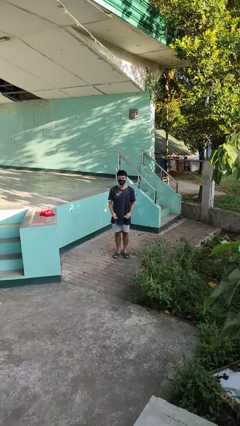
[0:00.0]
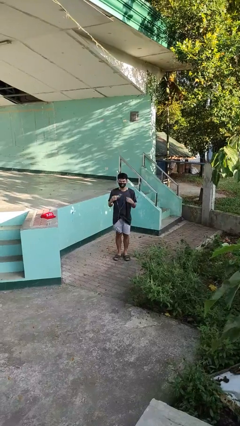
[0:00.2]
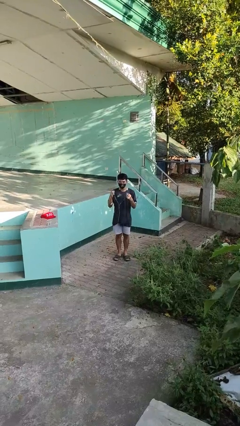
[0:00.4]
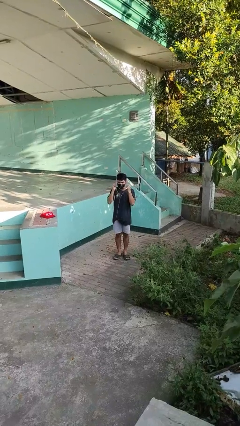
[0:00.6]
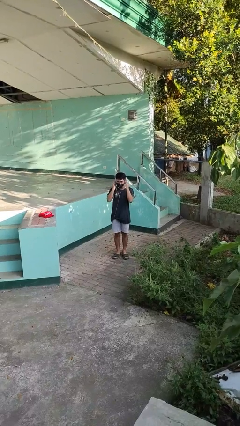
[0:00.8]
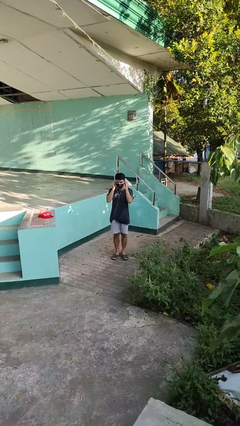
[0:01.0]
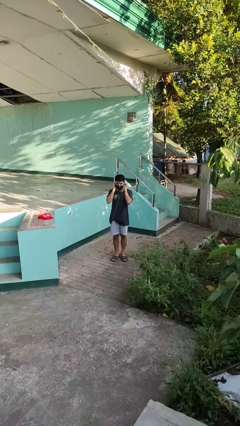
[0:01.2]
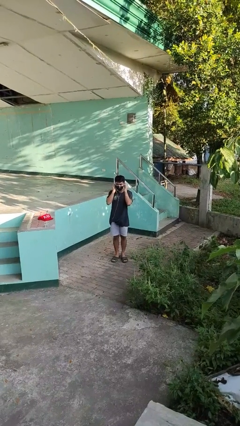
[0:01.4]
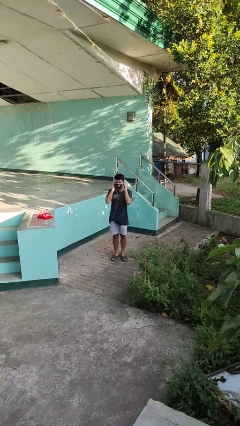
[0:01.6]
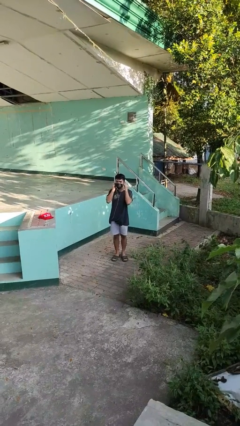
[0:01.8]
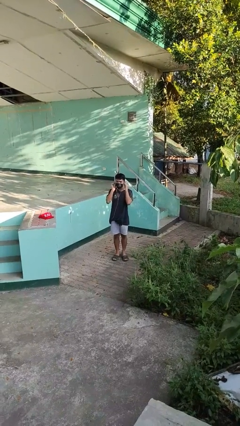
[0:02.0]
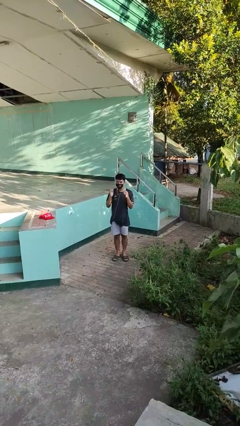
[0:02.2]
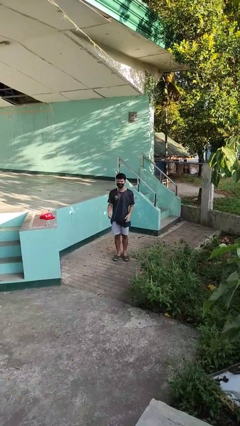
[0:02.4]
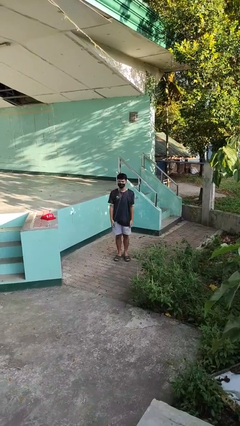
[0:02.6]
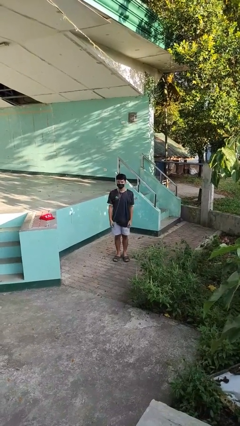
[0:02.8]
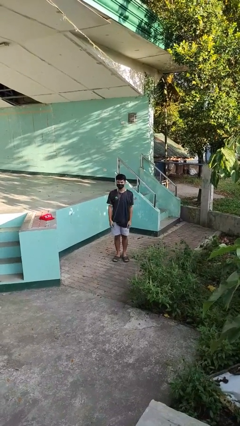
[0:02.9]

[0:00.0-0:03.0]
person puts on headphones

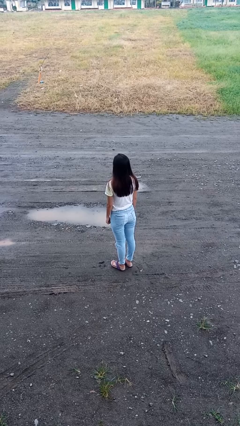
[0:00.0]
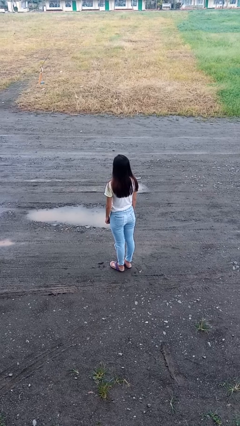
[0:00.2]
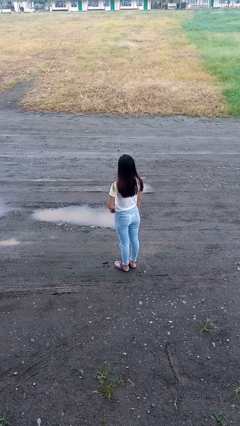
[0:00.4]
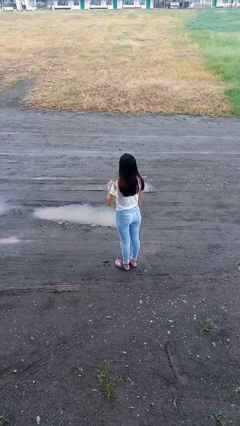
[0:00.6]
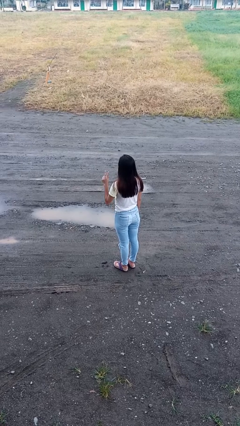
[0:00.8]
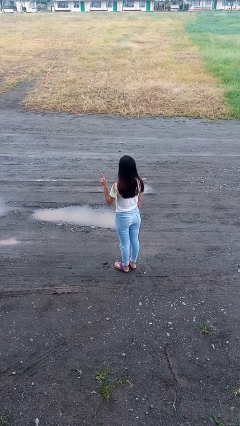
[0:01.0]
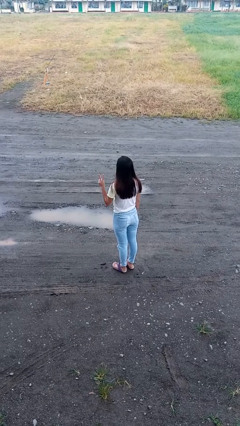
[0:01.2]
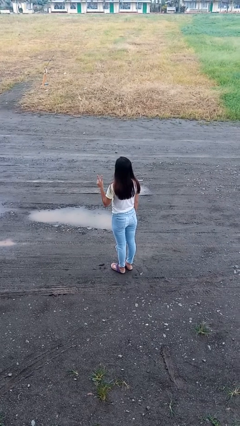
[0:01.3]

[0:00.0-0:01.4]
person gestures peace

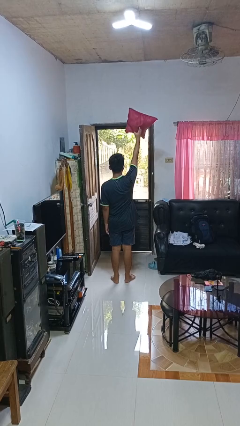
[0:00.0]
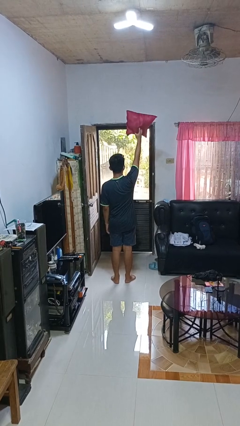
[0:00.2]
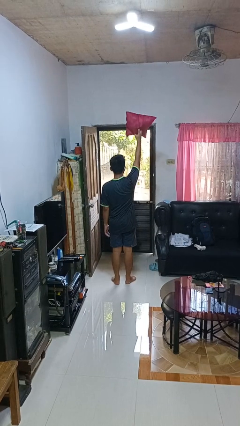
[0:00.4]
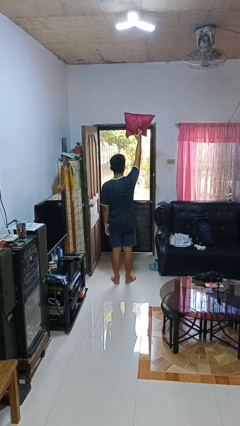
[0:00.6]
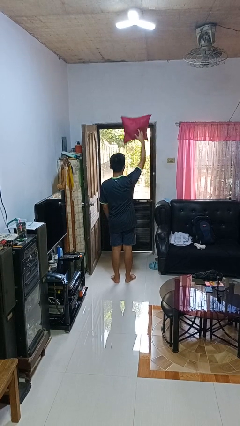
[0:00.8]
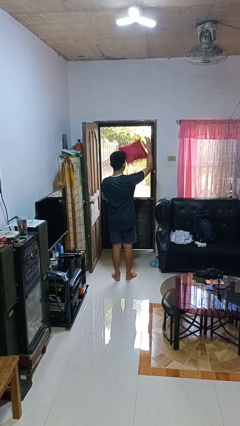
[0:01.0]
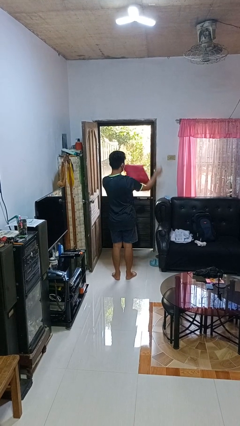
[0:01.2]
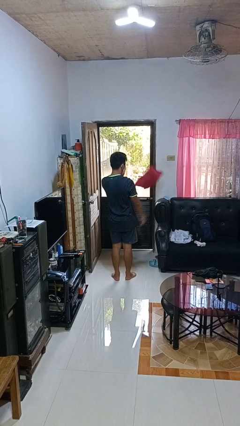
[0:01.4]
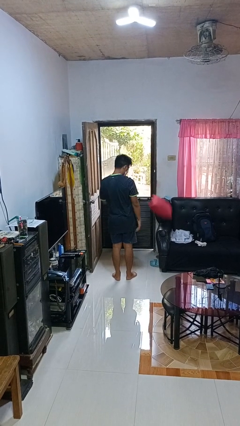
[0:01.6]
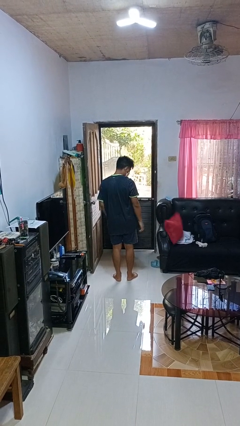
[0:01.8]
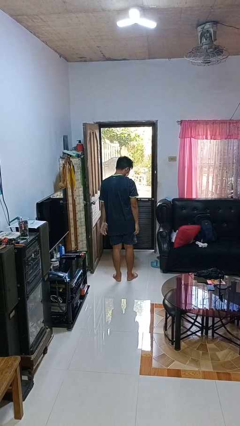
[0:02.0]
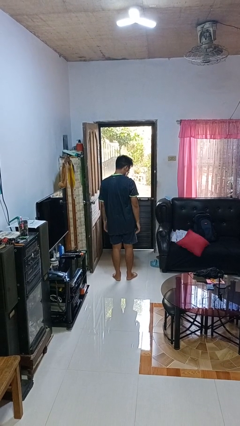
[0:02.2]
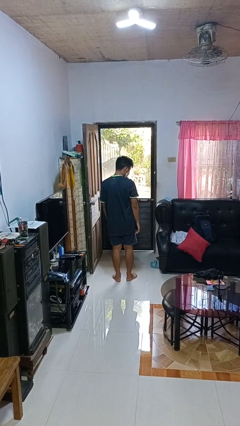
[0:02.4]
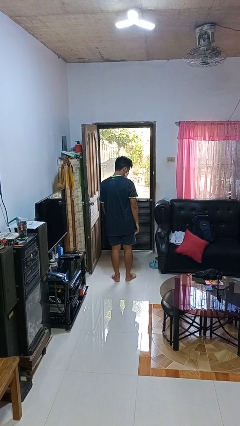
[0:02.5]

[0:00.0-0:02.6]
person drops object

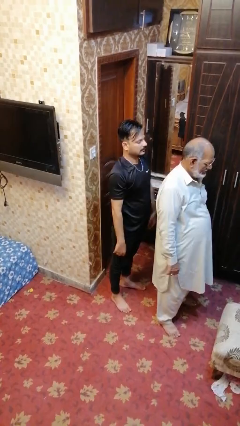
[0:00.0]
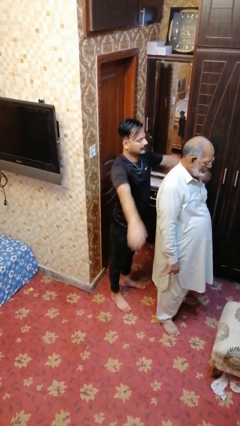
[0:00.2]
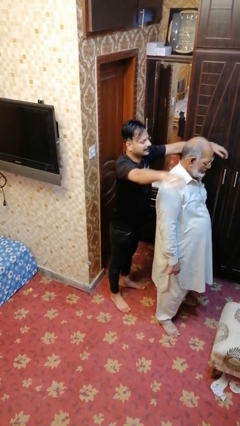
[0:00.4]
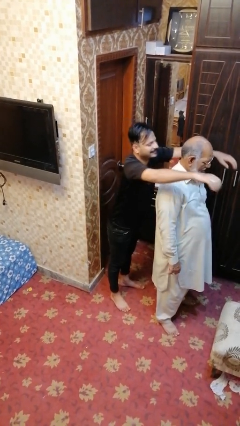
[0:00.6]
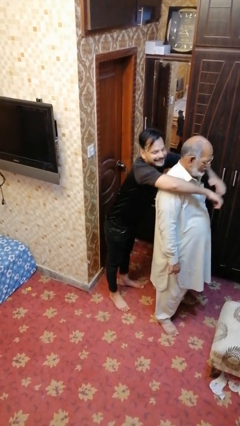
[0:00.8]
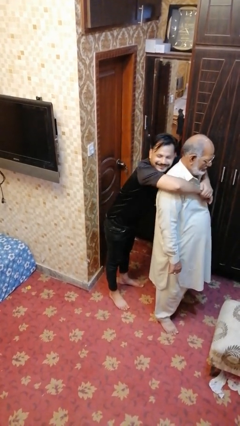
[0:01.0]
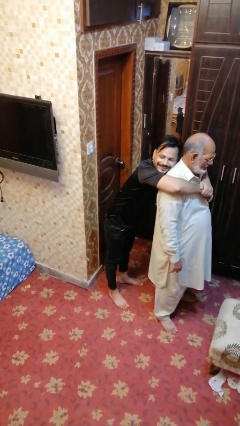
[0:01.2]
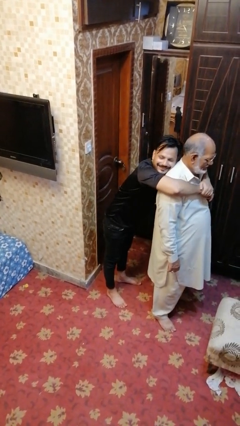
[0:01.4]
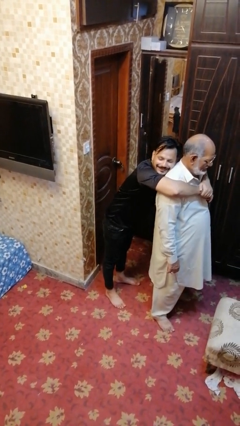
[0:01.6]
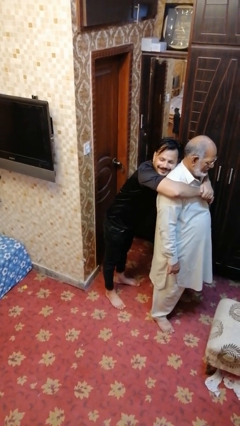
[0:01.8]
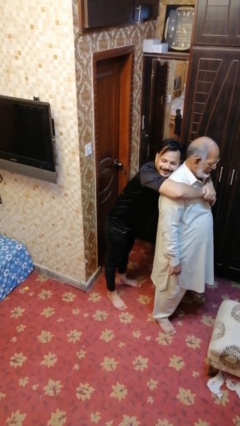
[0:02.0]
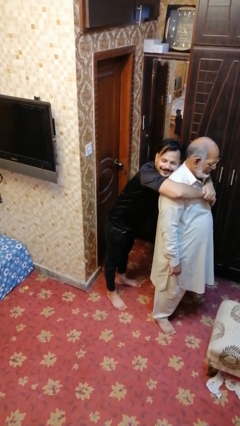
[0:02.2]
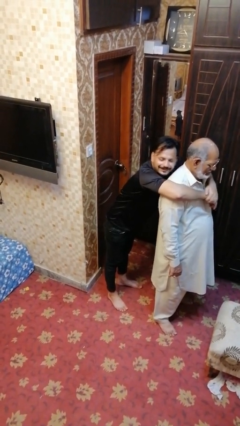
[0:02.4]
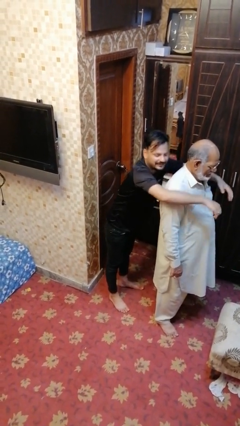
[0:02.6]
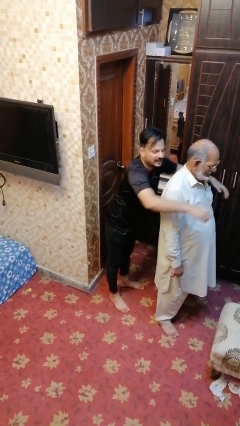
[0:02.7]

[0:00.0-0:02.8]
person hugs person from behind

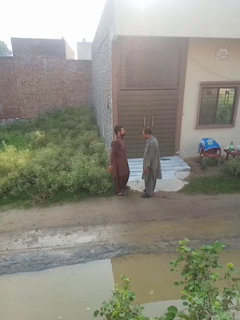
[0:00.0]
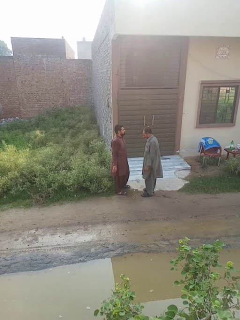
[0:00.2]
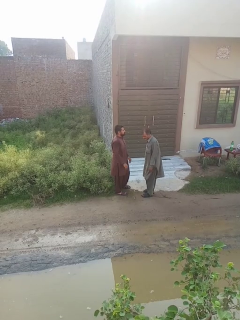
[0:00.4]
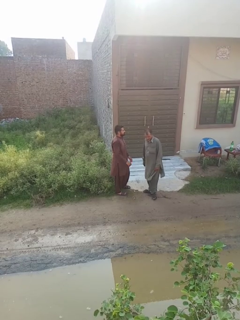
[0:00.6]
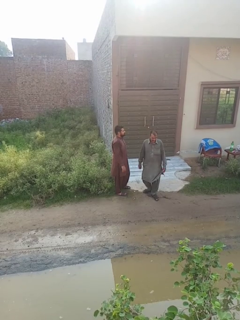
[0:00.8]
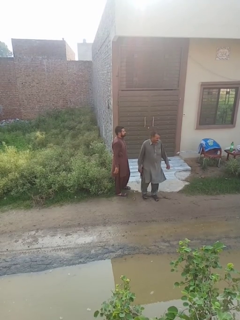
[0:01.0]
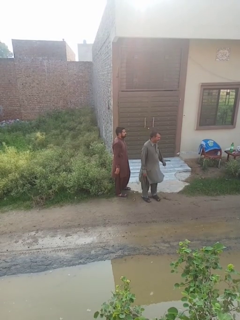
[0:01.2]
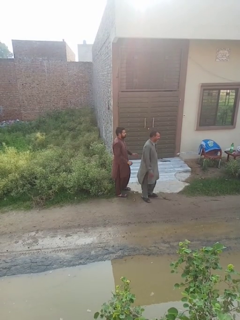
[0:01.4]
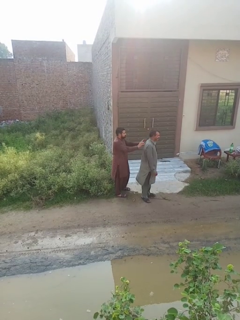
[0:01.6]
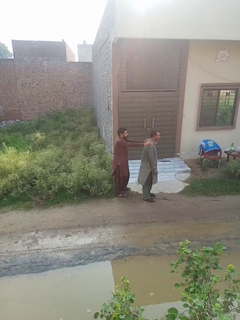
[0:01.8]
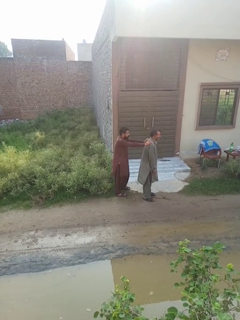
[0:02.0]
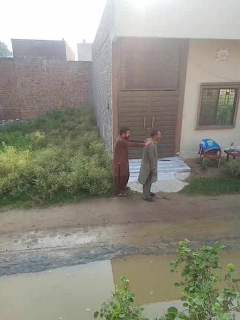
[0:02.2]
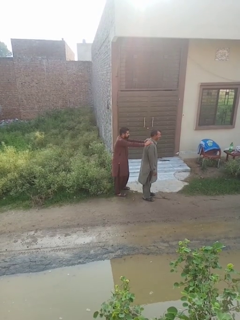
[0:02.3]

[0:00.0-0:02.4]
person grabs person by shoulder

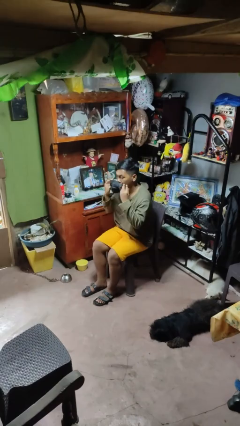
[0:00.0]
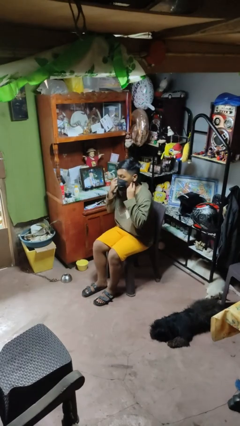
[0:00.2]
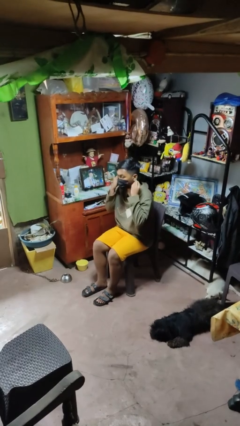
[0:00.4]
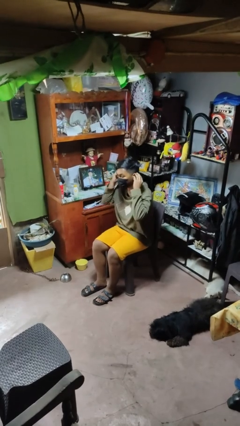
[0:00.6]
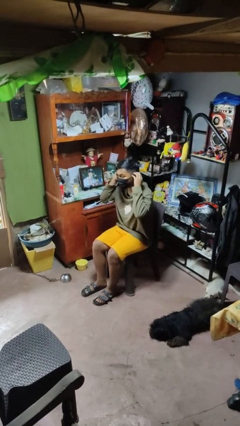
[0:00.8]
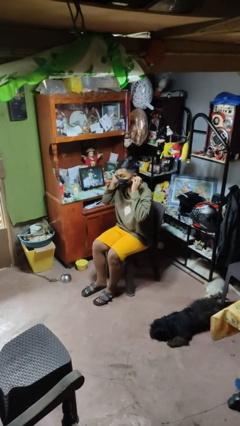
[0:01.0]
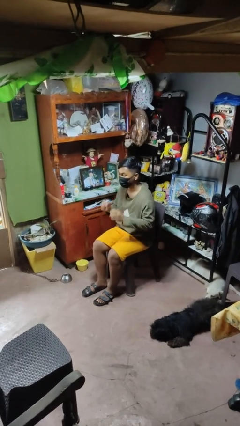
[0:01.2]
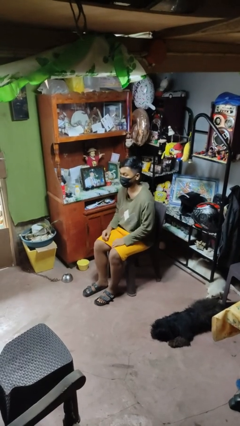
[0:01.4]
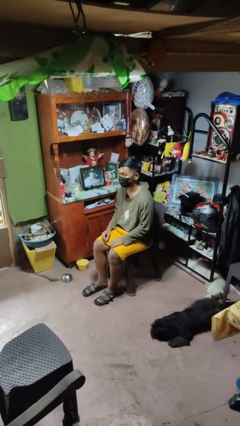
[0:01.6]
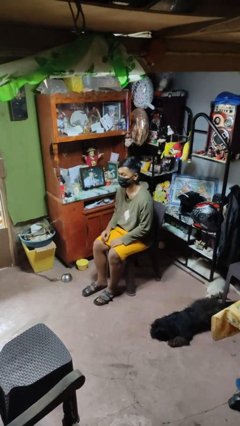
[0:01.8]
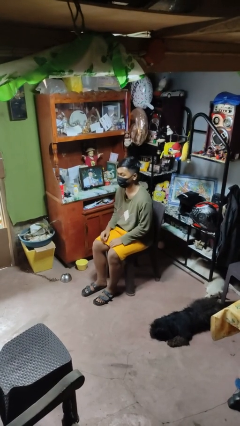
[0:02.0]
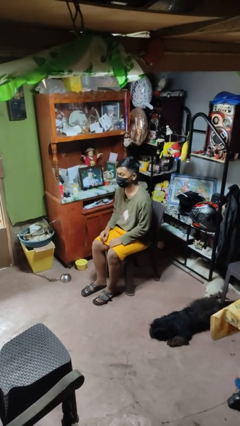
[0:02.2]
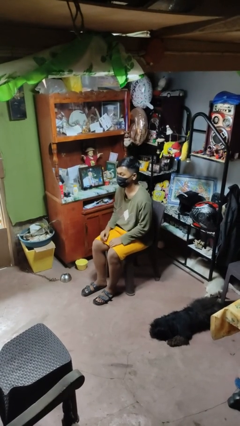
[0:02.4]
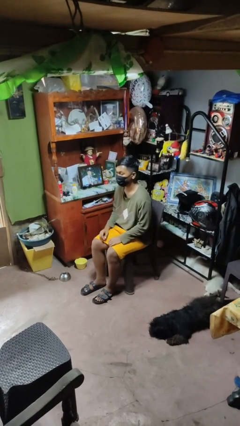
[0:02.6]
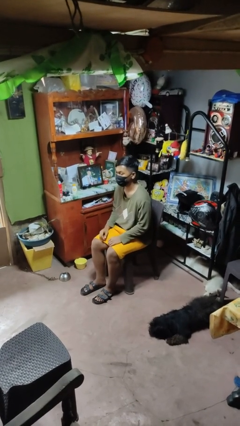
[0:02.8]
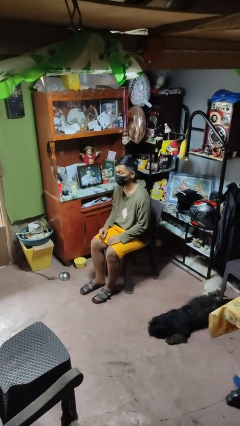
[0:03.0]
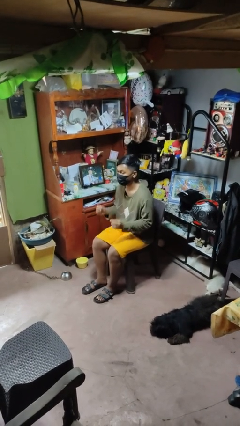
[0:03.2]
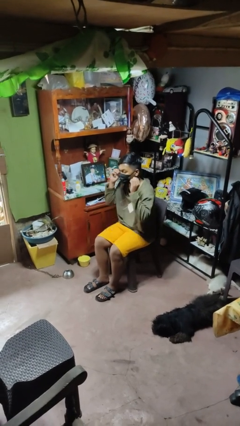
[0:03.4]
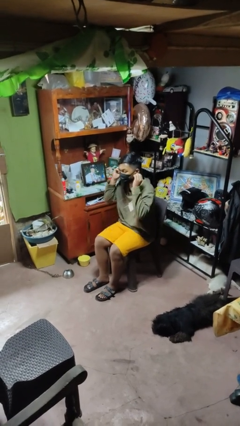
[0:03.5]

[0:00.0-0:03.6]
person puts on facemask

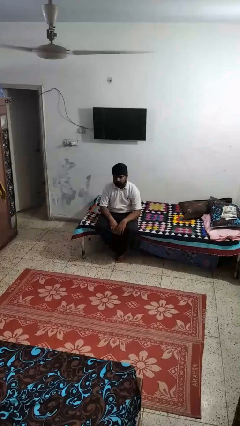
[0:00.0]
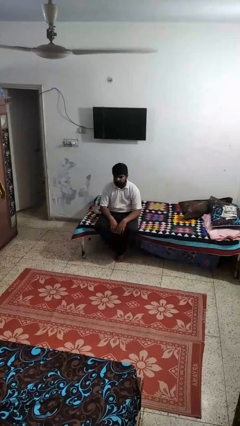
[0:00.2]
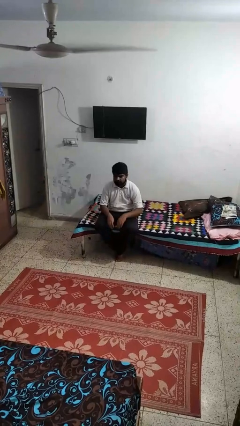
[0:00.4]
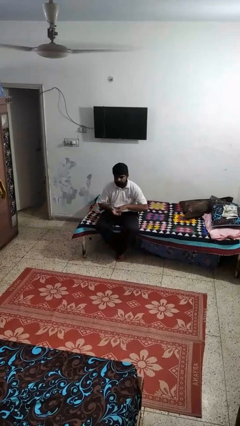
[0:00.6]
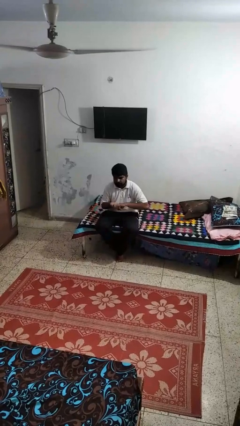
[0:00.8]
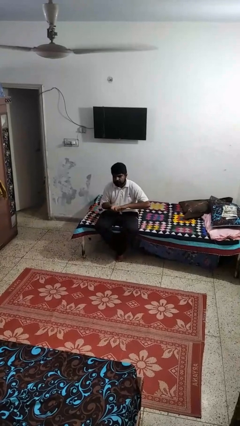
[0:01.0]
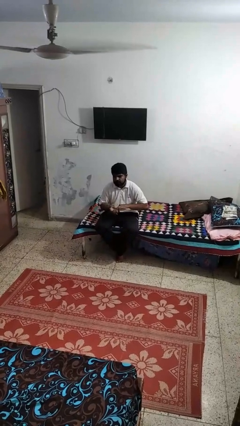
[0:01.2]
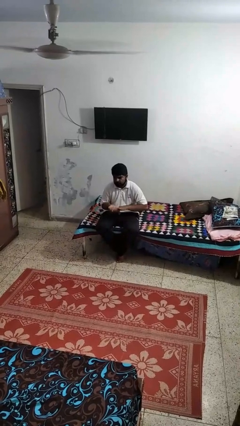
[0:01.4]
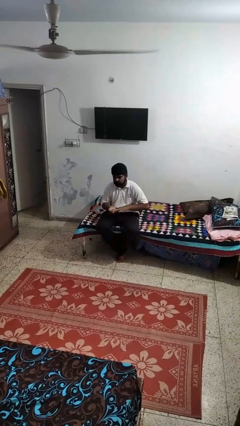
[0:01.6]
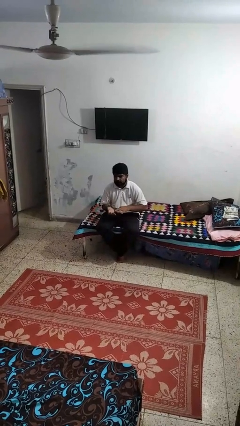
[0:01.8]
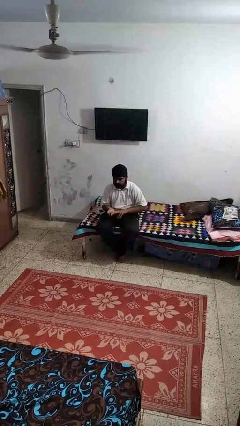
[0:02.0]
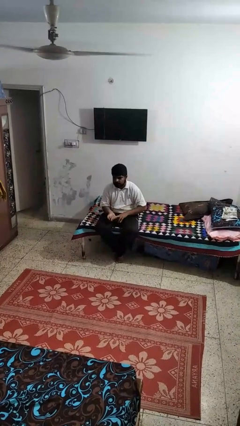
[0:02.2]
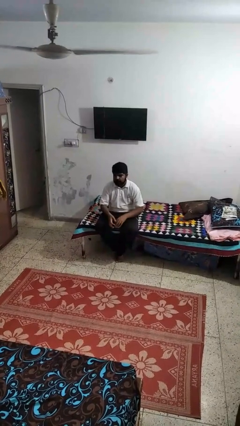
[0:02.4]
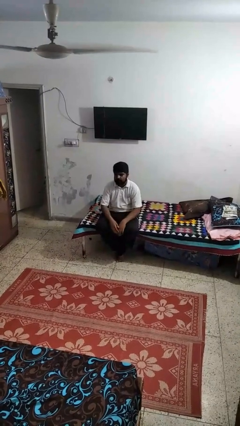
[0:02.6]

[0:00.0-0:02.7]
person cracks knuckles
